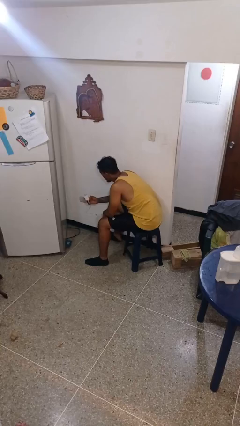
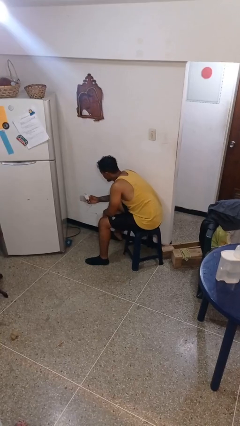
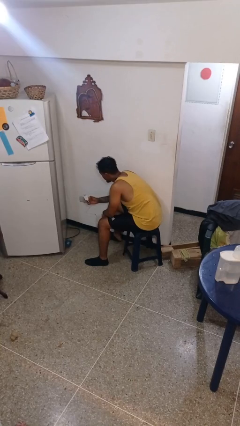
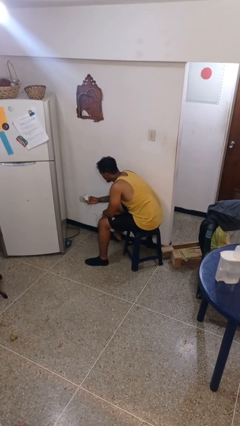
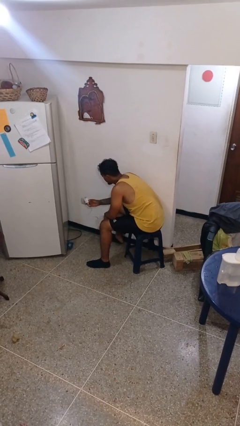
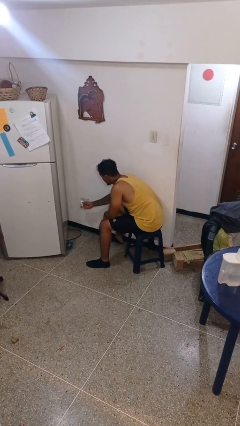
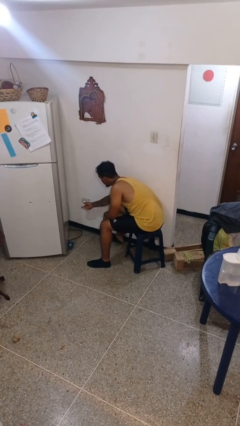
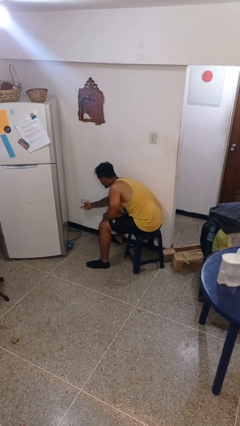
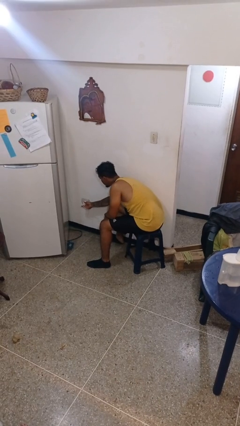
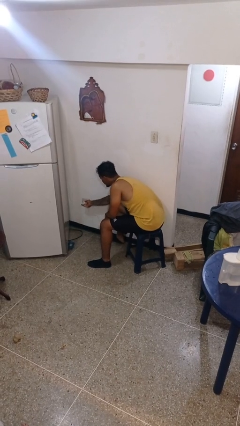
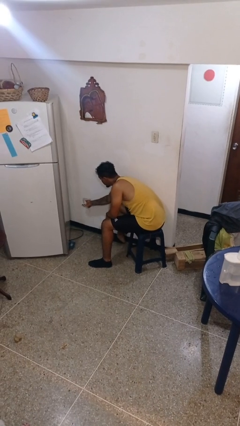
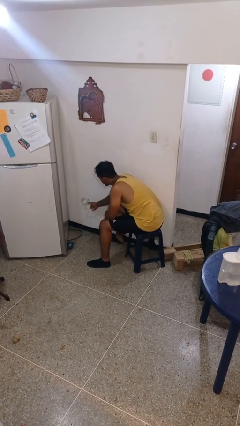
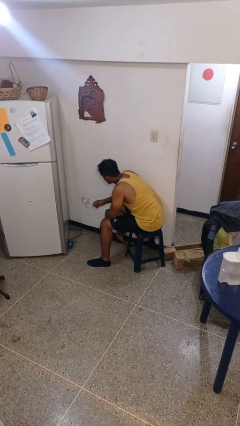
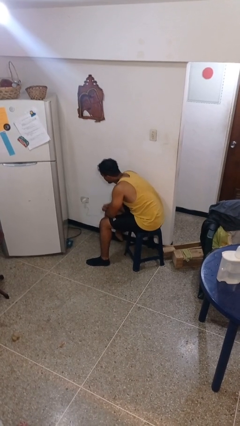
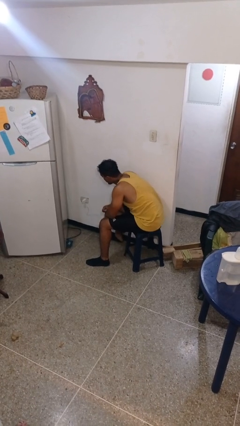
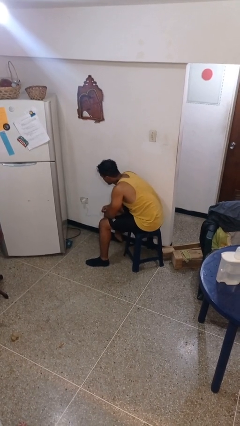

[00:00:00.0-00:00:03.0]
person plugs into electrical socket

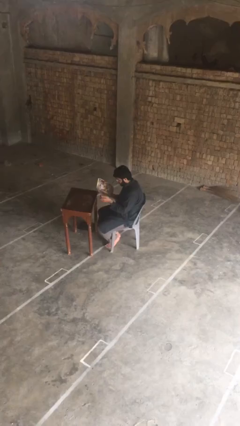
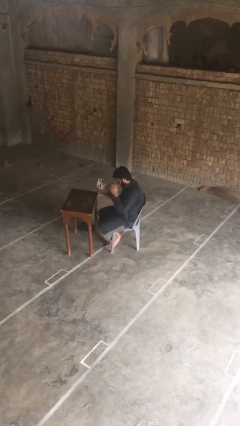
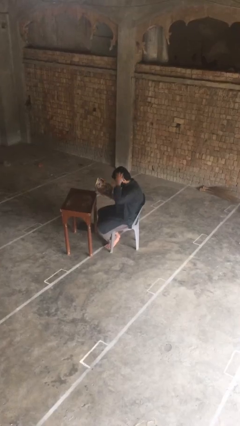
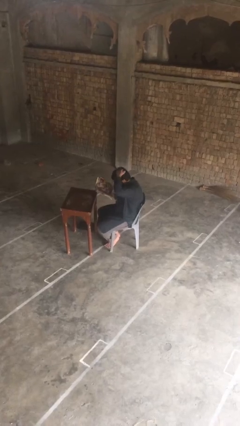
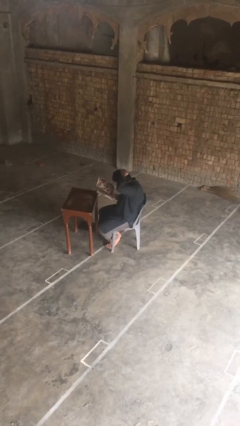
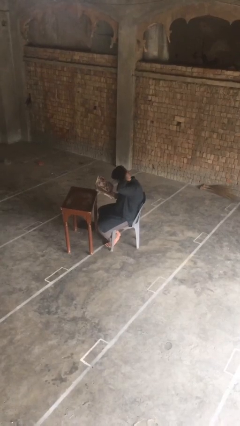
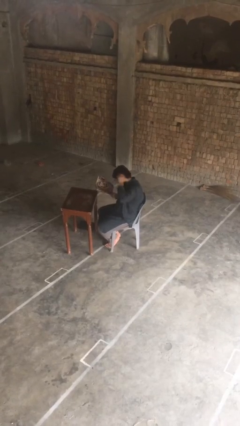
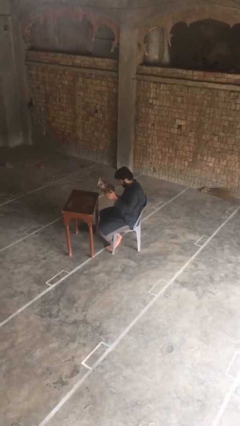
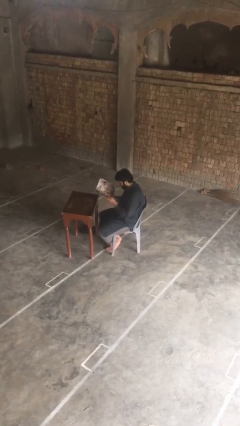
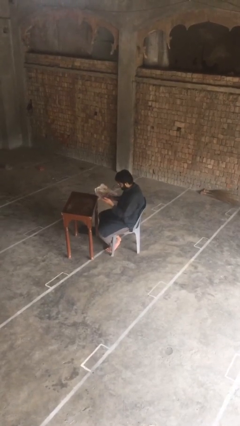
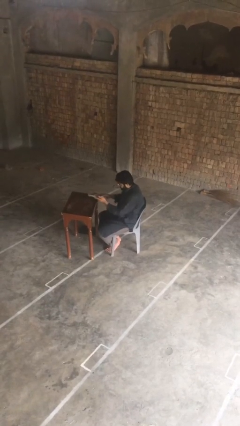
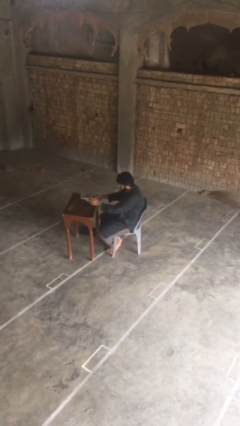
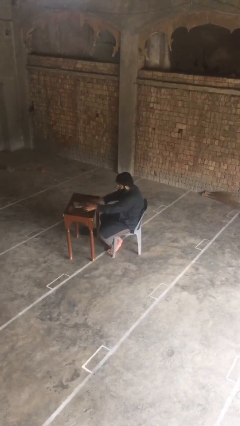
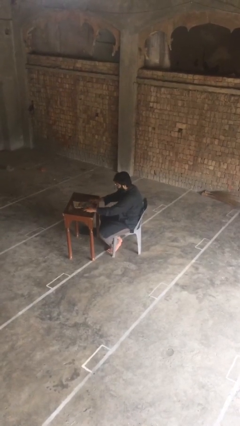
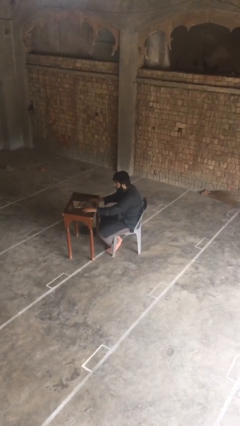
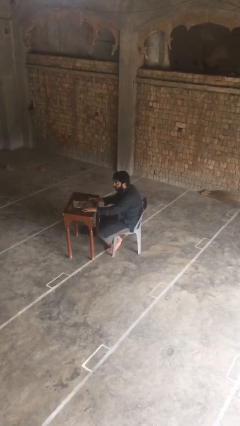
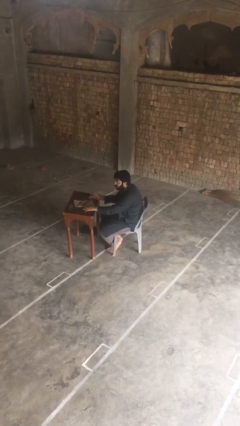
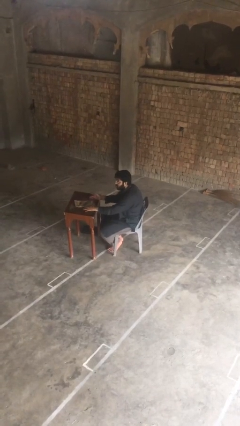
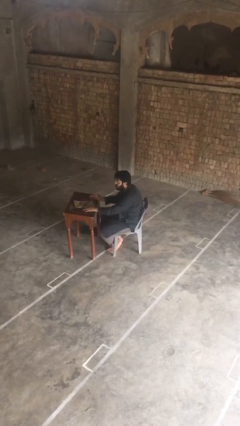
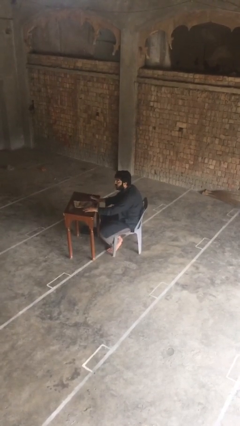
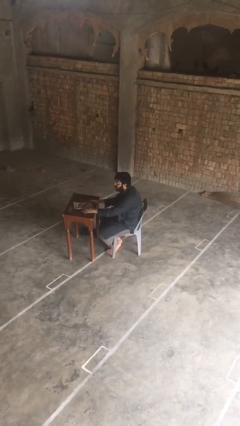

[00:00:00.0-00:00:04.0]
person puts down object on table

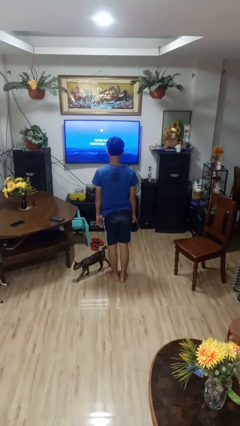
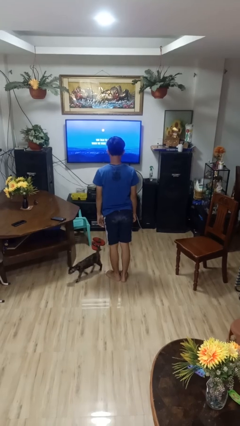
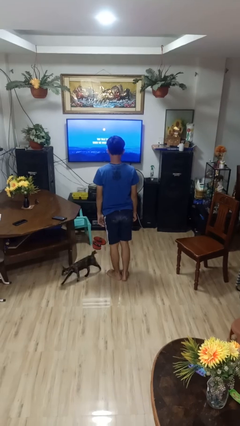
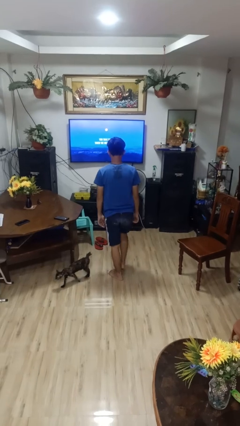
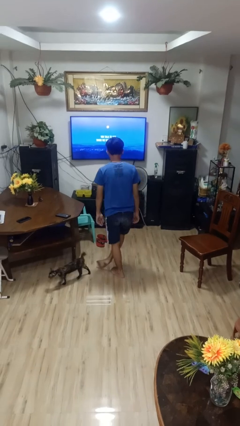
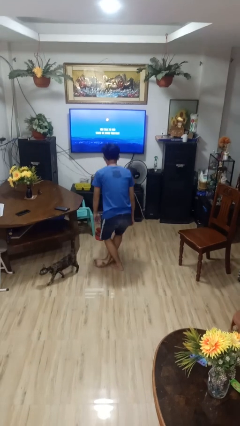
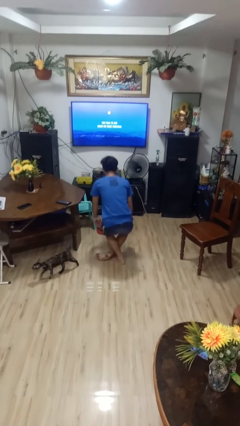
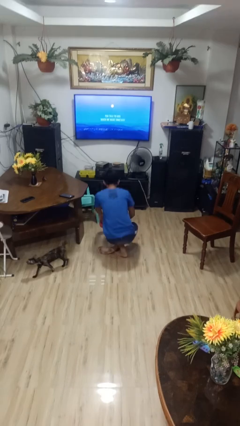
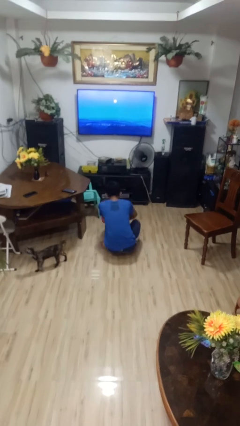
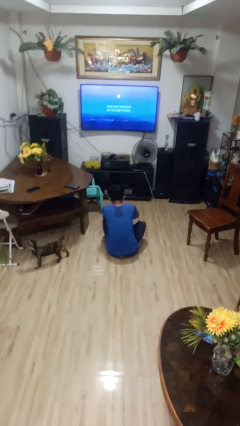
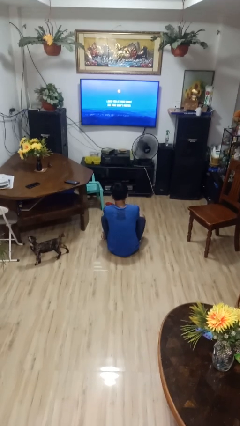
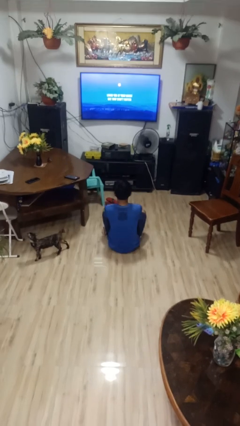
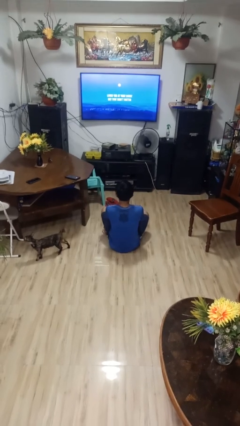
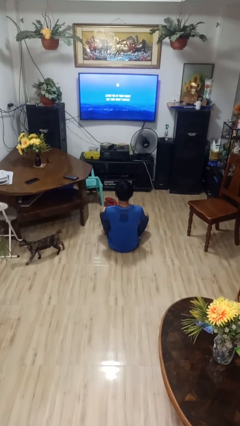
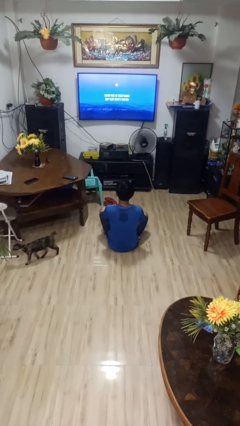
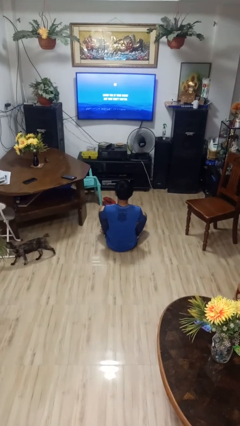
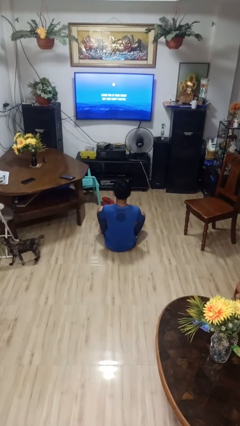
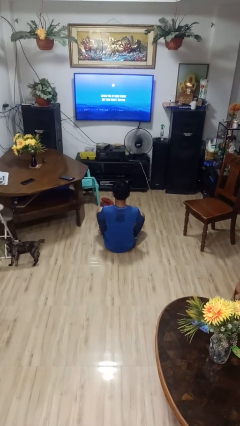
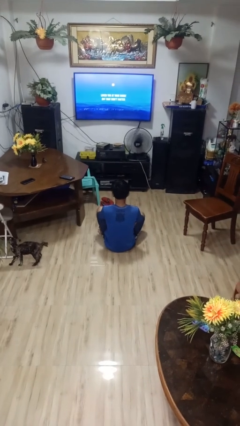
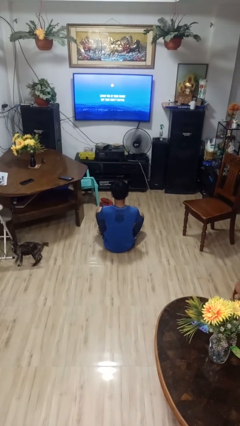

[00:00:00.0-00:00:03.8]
person sits crisscross

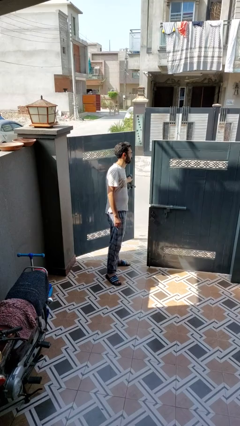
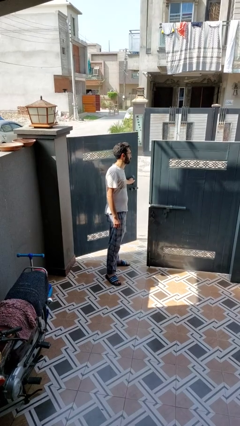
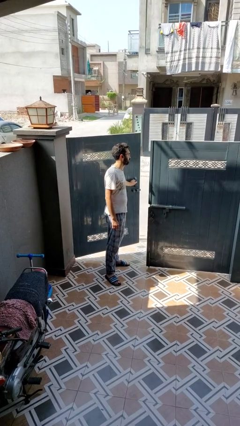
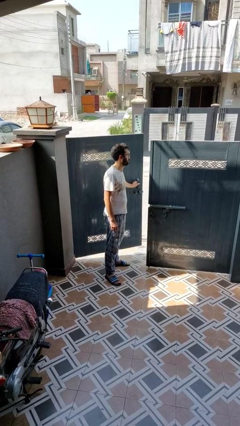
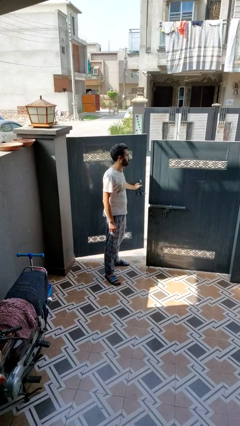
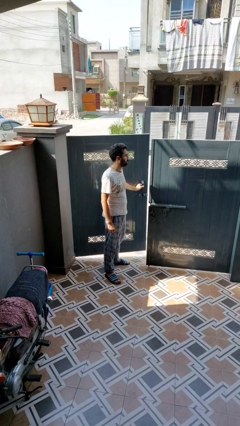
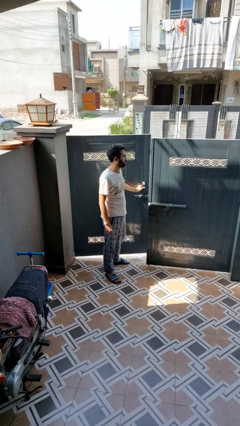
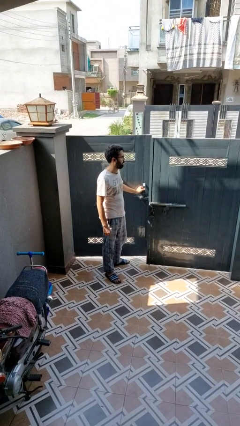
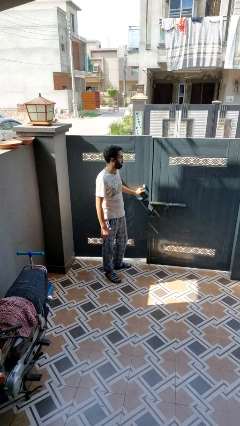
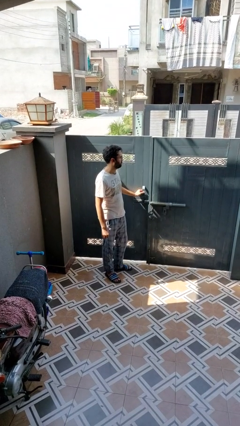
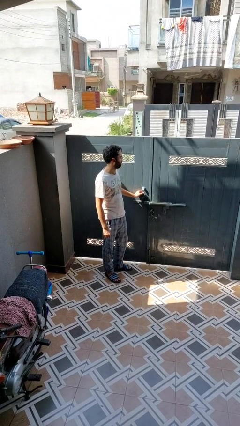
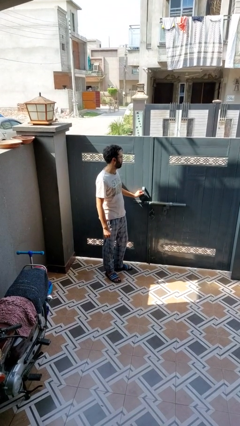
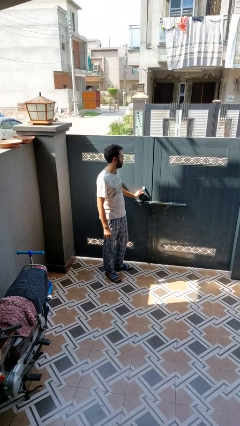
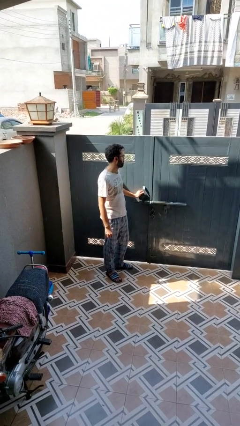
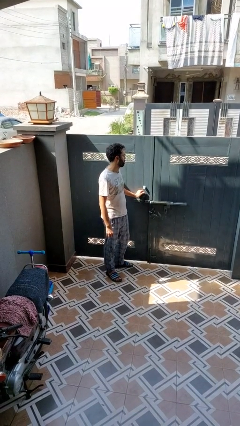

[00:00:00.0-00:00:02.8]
person closes gate

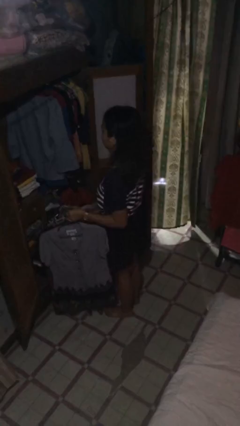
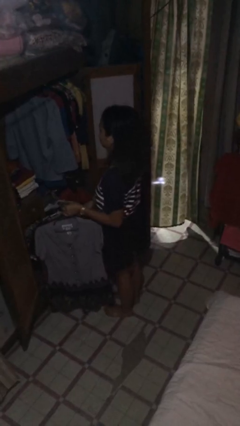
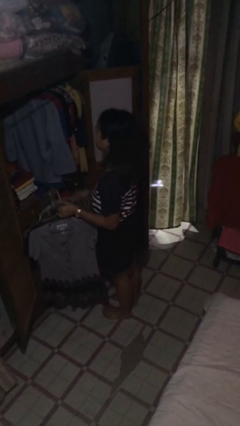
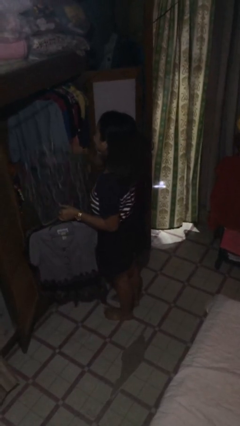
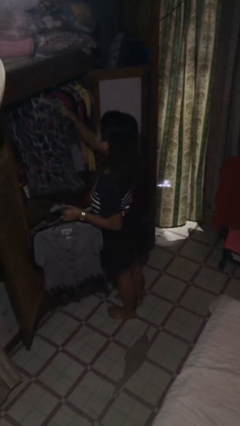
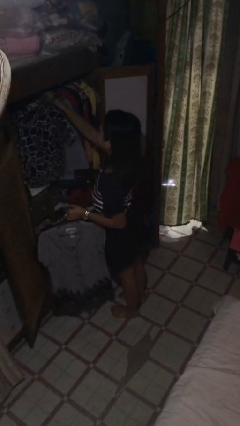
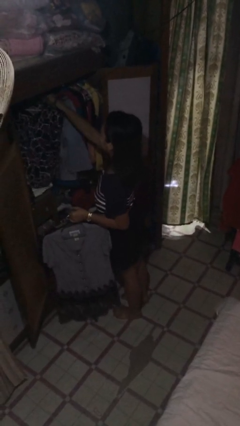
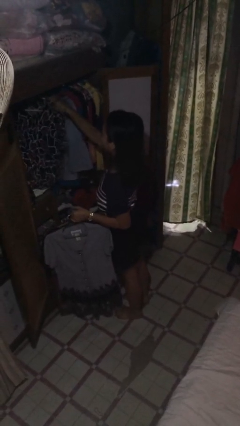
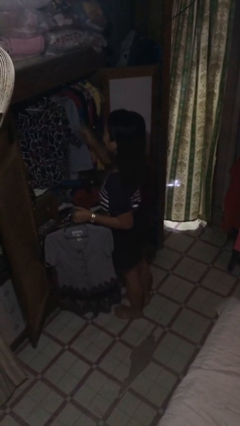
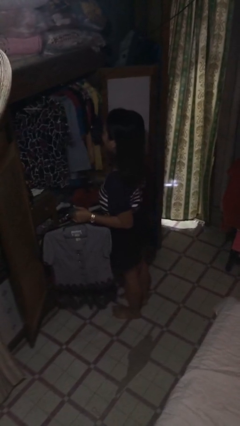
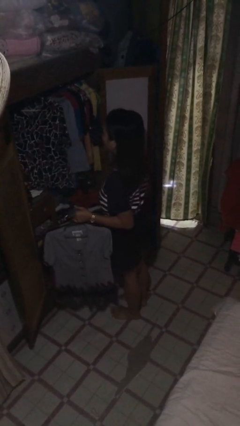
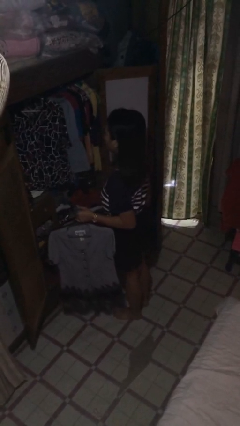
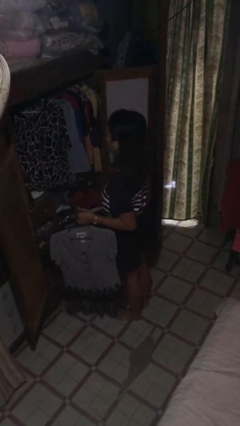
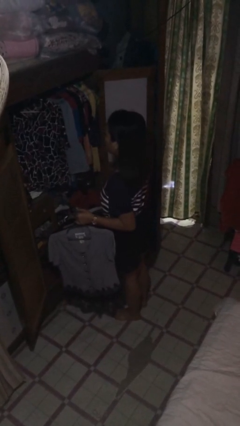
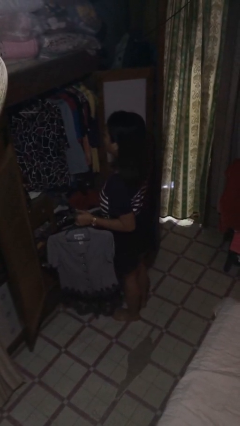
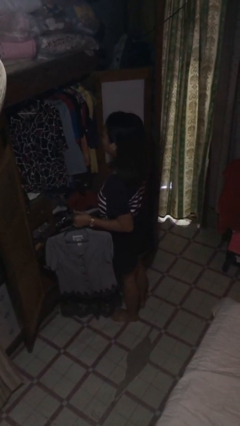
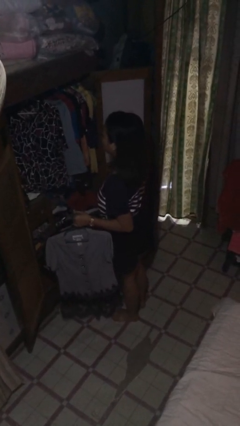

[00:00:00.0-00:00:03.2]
person puts clothes into closet

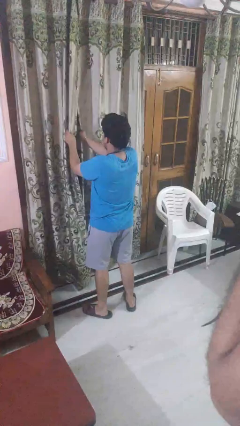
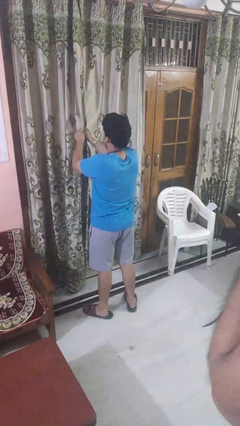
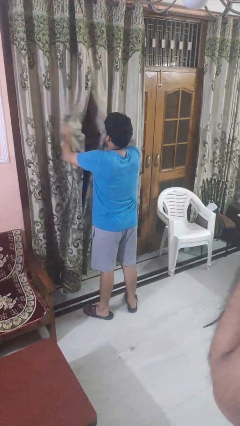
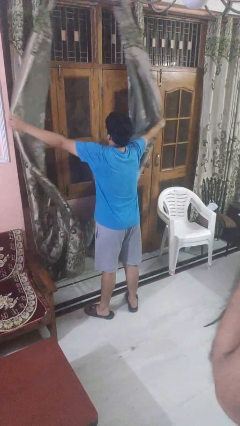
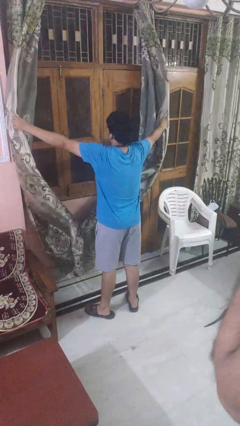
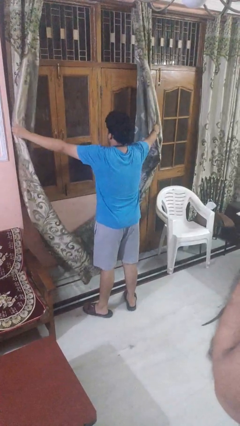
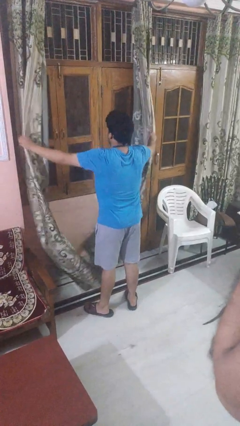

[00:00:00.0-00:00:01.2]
person opens curtains
